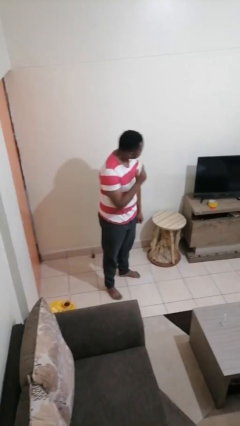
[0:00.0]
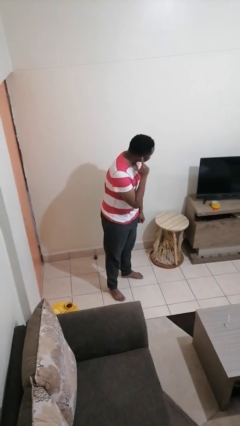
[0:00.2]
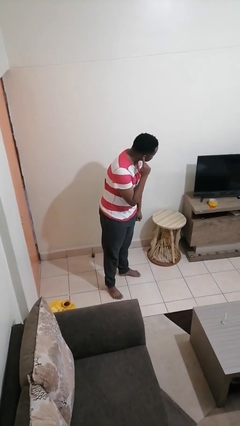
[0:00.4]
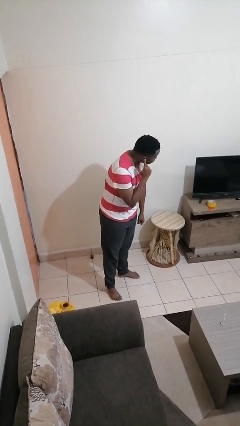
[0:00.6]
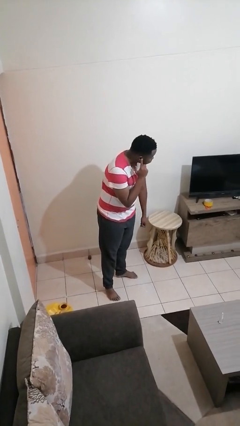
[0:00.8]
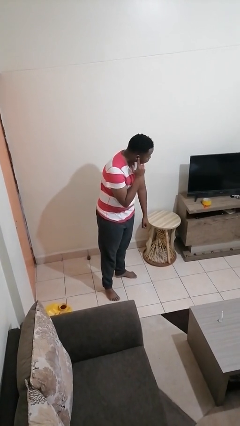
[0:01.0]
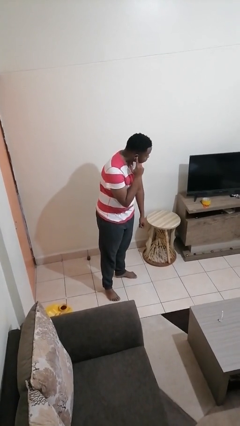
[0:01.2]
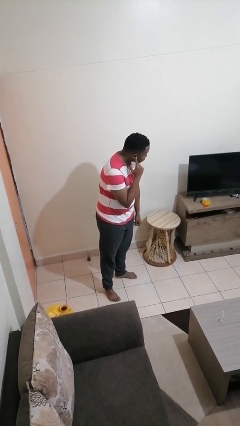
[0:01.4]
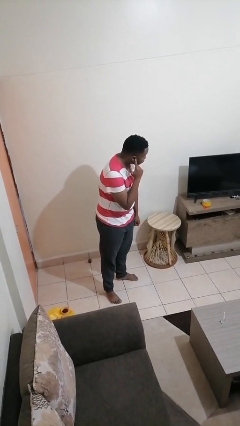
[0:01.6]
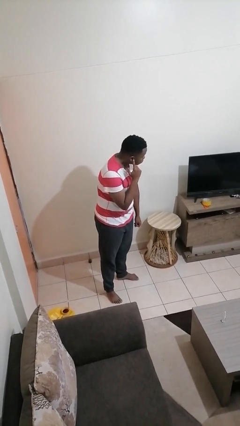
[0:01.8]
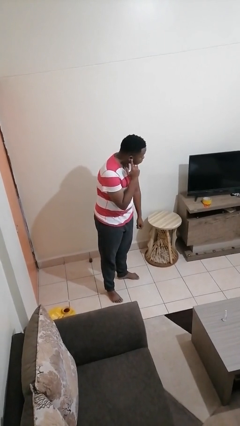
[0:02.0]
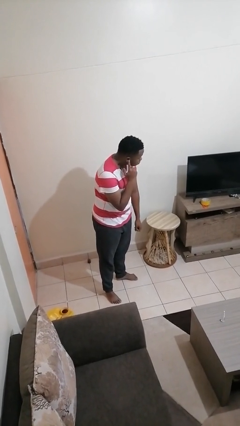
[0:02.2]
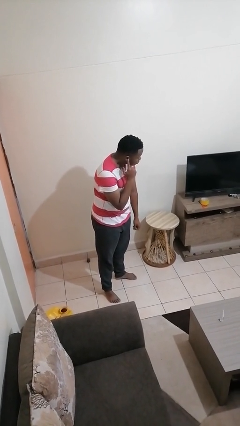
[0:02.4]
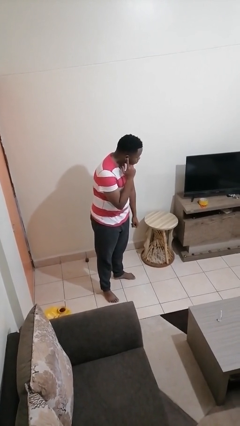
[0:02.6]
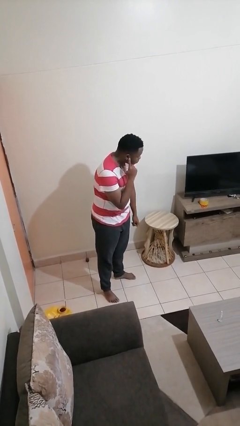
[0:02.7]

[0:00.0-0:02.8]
person gestures listen closely

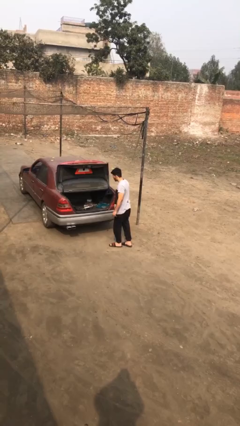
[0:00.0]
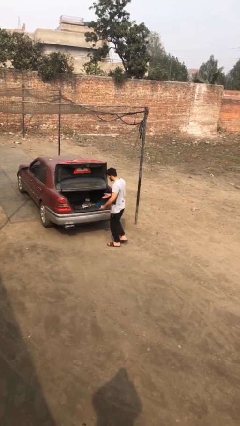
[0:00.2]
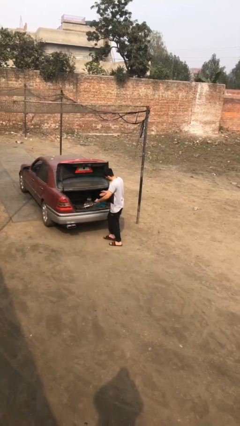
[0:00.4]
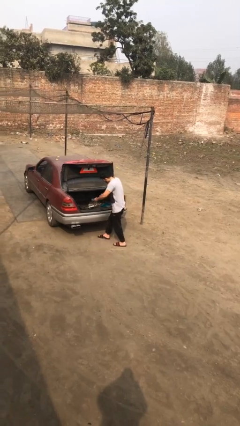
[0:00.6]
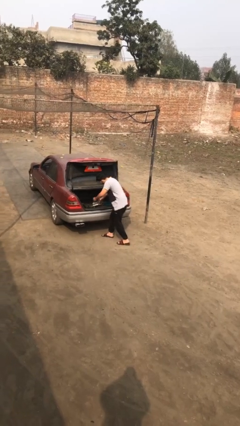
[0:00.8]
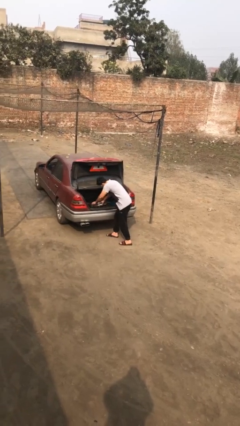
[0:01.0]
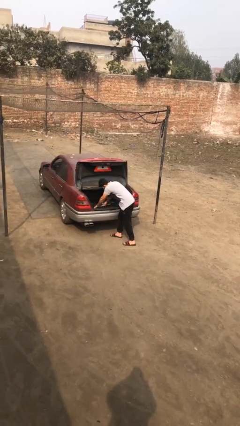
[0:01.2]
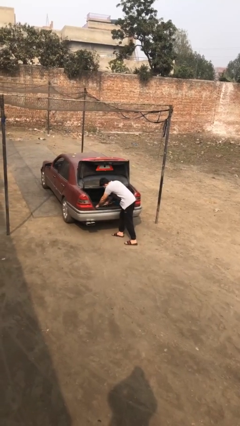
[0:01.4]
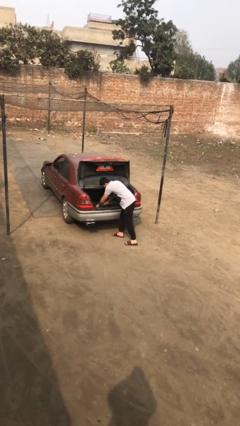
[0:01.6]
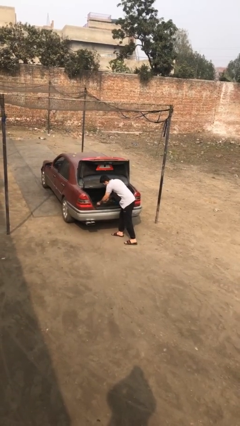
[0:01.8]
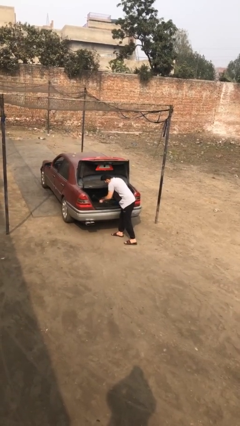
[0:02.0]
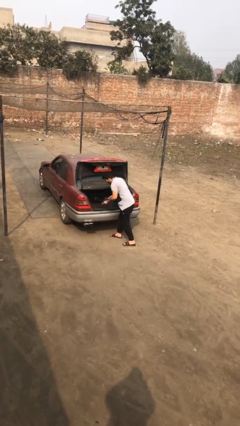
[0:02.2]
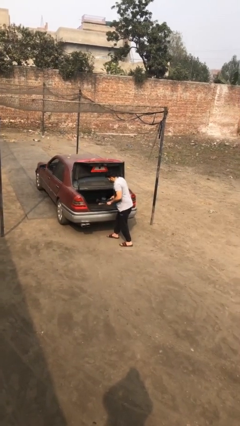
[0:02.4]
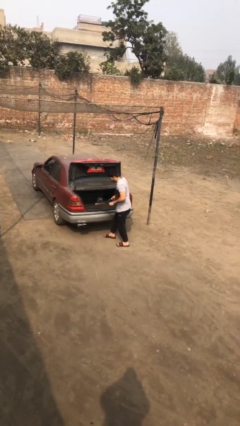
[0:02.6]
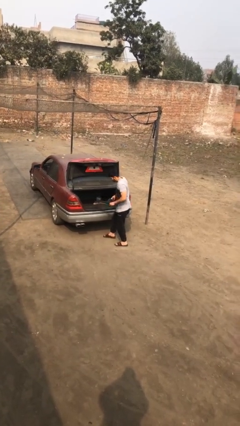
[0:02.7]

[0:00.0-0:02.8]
person unloads car

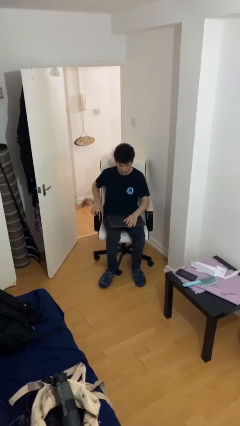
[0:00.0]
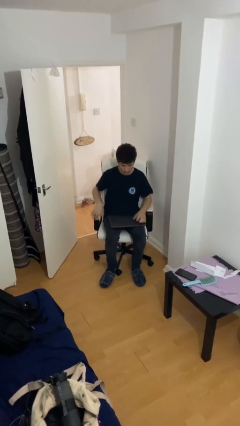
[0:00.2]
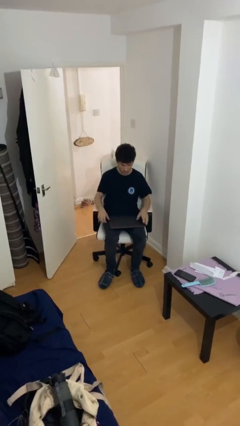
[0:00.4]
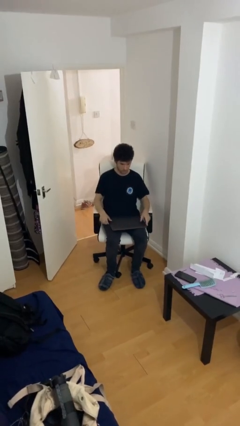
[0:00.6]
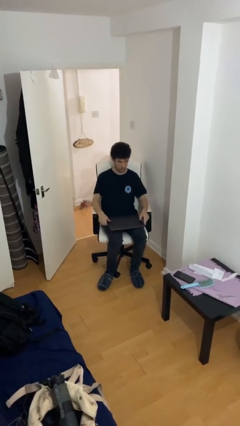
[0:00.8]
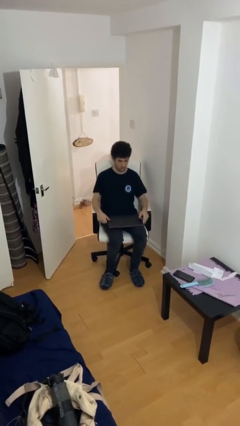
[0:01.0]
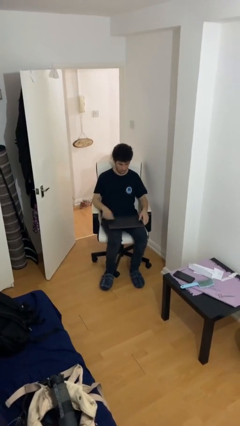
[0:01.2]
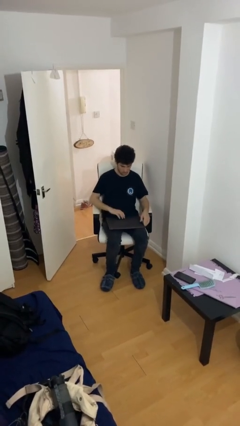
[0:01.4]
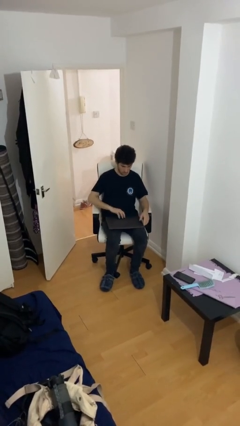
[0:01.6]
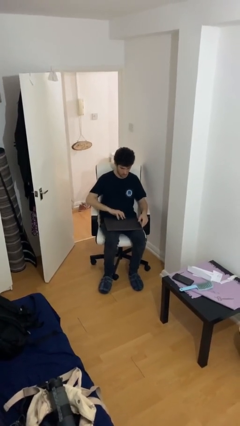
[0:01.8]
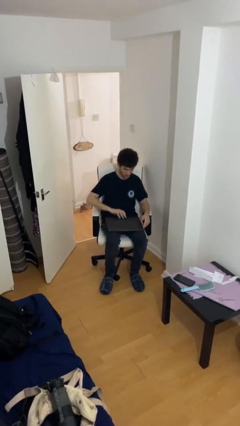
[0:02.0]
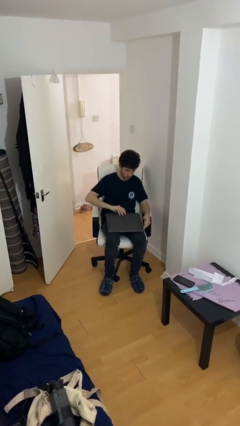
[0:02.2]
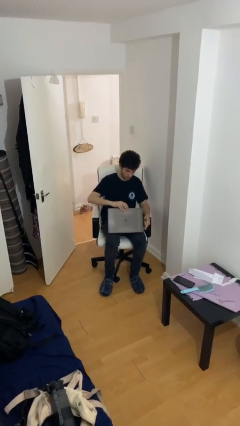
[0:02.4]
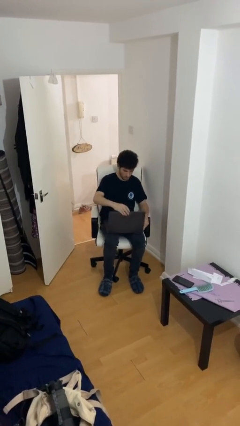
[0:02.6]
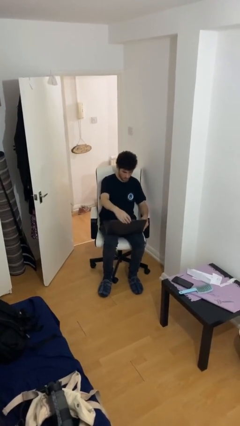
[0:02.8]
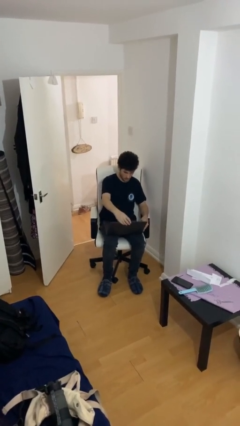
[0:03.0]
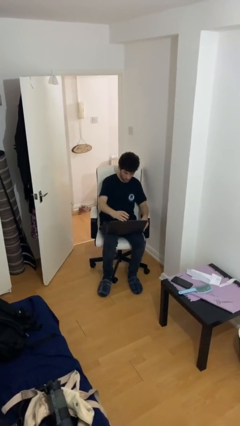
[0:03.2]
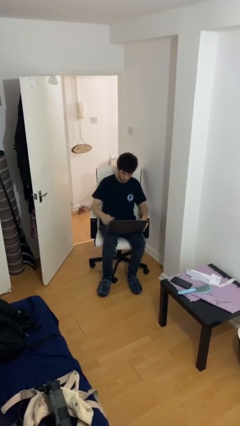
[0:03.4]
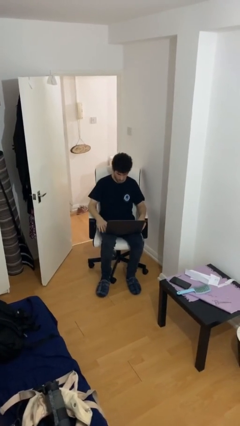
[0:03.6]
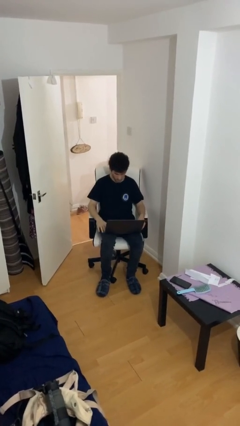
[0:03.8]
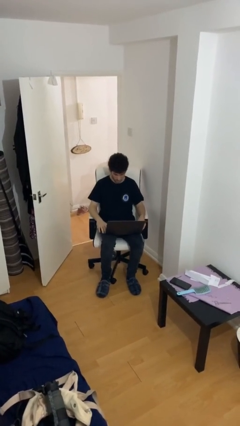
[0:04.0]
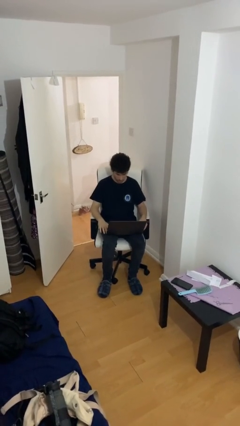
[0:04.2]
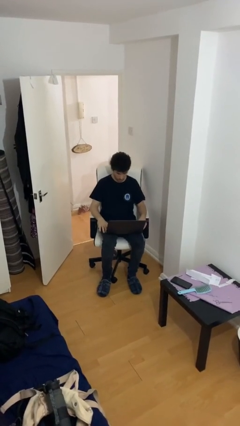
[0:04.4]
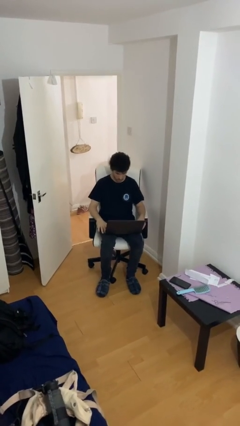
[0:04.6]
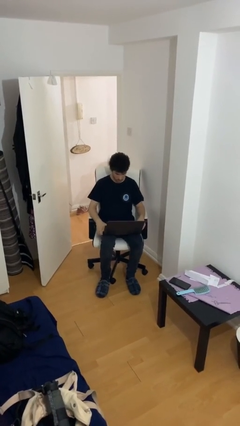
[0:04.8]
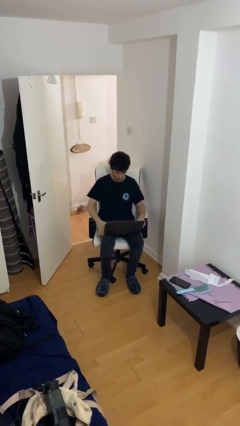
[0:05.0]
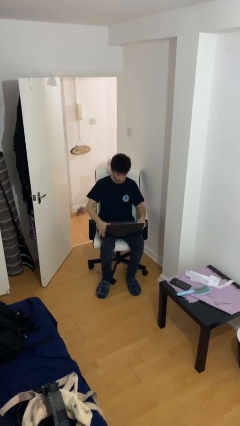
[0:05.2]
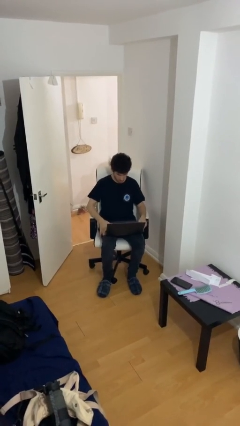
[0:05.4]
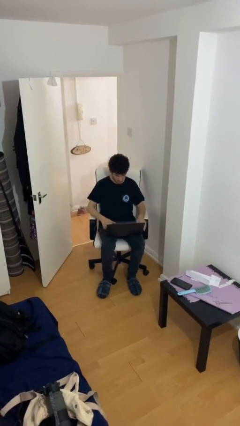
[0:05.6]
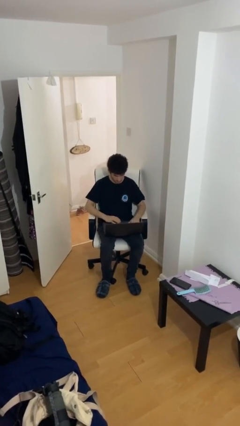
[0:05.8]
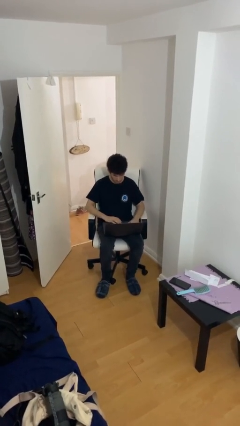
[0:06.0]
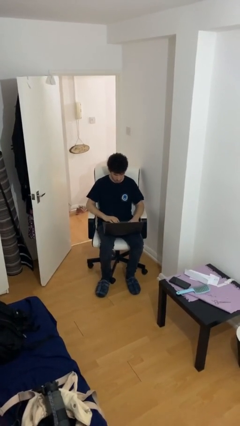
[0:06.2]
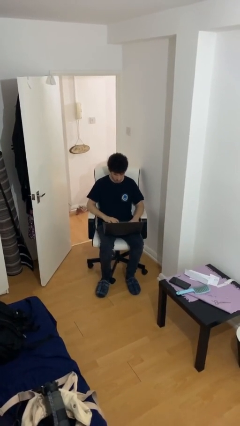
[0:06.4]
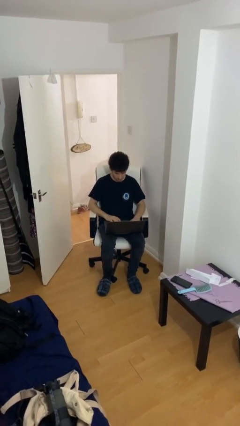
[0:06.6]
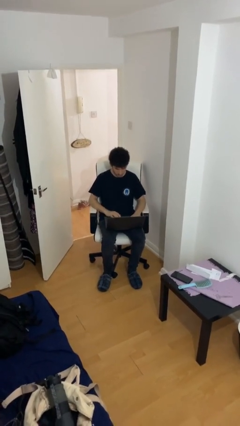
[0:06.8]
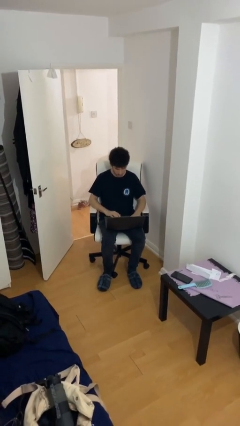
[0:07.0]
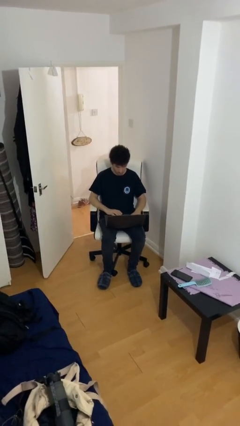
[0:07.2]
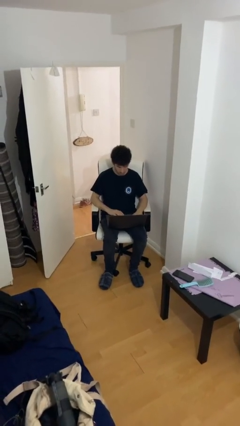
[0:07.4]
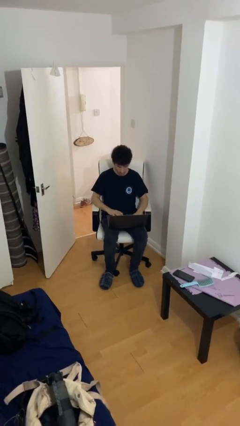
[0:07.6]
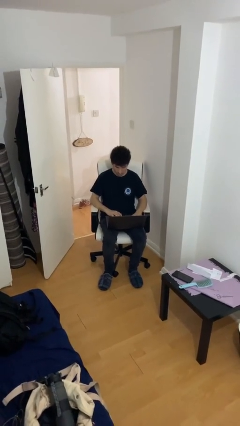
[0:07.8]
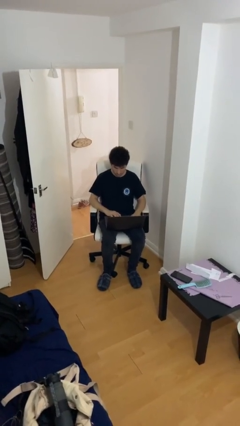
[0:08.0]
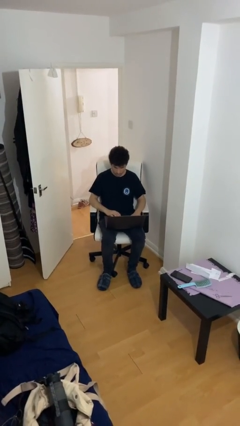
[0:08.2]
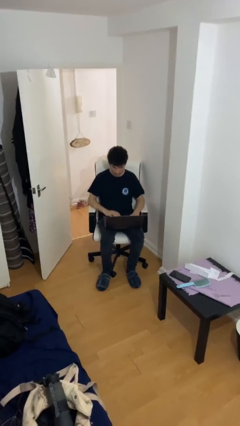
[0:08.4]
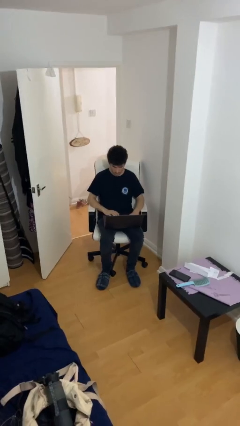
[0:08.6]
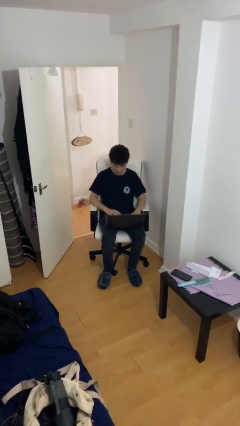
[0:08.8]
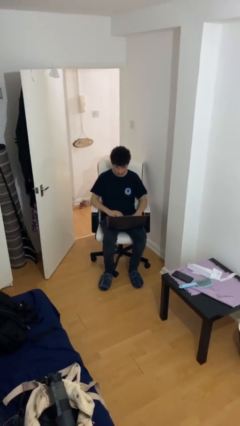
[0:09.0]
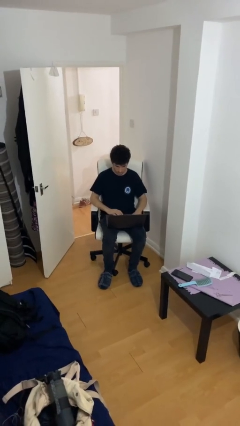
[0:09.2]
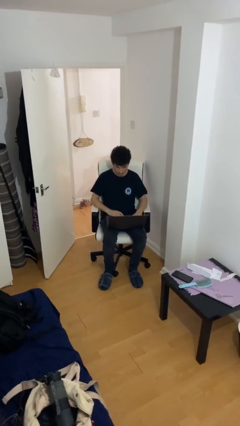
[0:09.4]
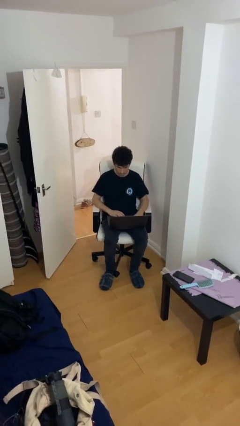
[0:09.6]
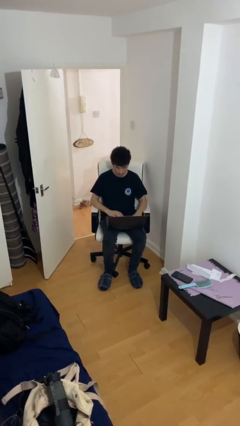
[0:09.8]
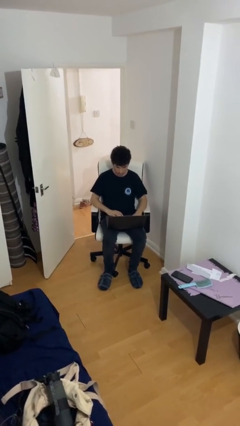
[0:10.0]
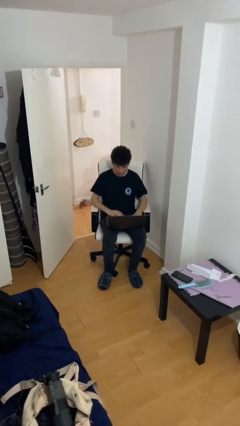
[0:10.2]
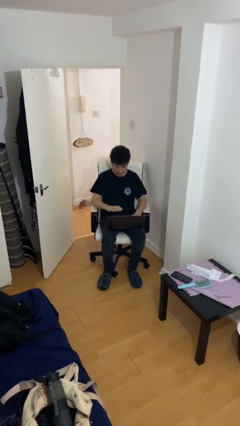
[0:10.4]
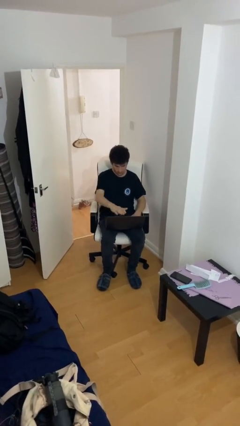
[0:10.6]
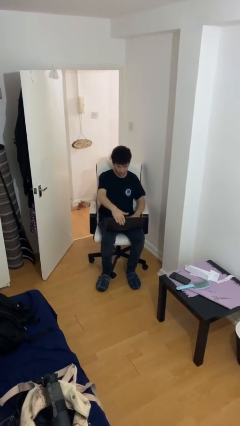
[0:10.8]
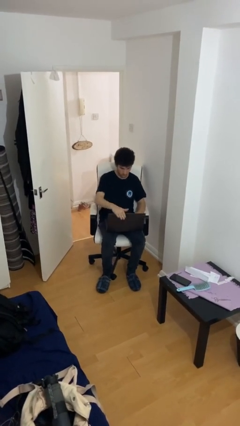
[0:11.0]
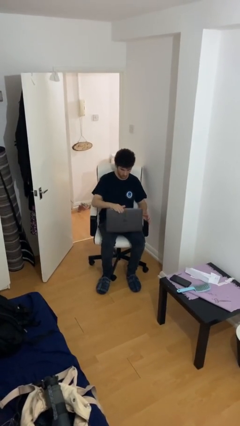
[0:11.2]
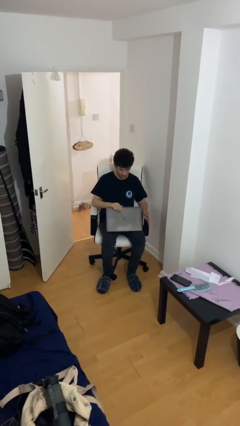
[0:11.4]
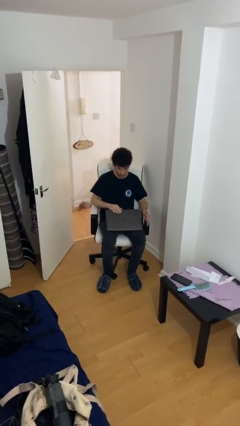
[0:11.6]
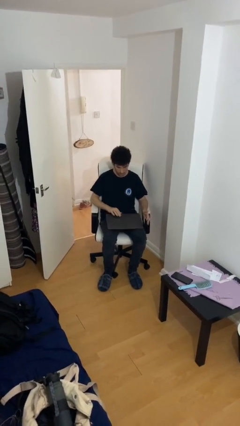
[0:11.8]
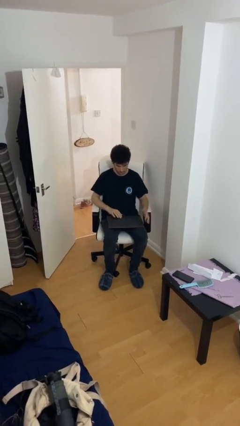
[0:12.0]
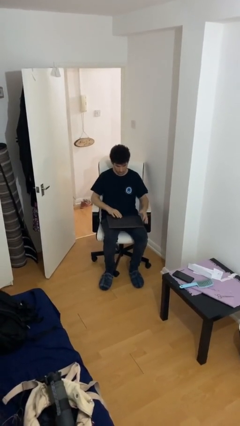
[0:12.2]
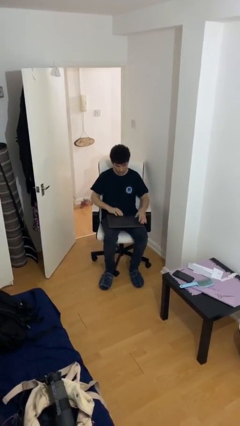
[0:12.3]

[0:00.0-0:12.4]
person interacts with laptop
